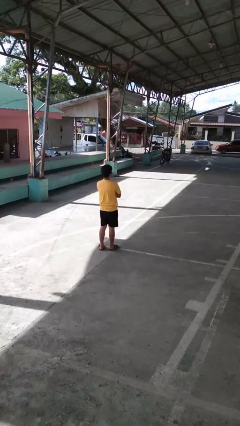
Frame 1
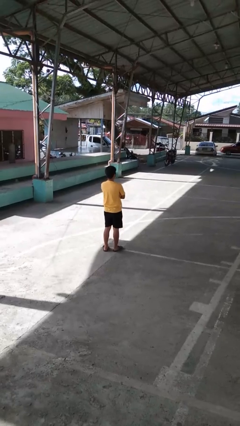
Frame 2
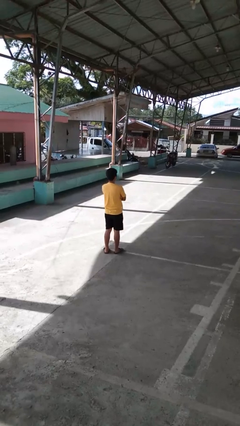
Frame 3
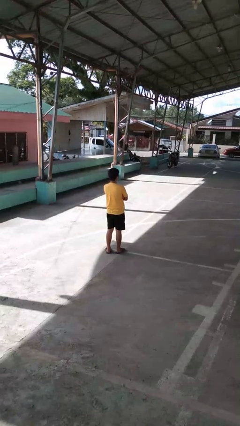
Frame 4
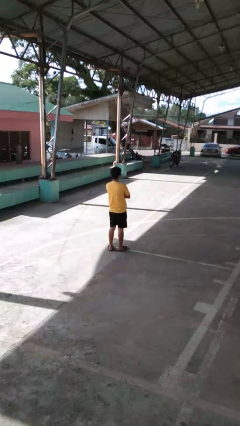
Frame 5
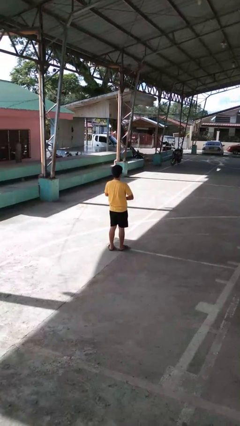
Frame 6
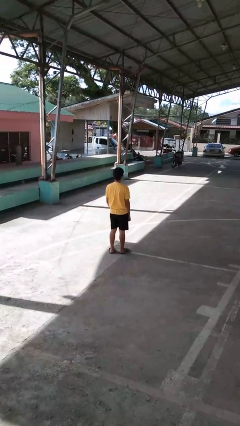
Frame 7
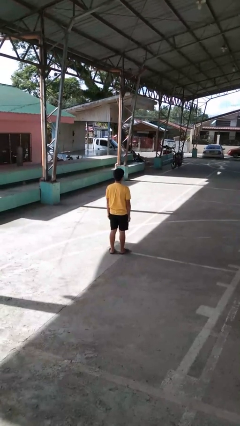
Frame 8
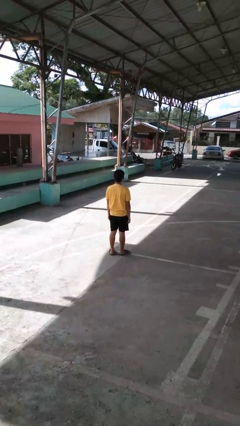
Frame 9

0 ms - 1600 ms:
person crosses arms

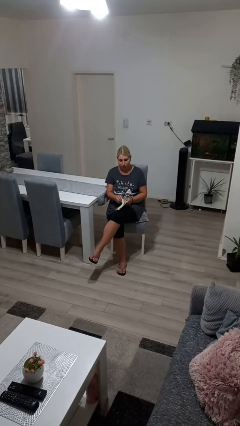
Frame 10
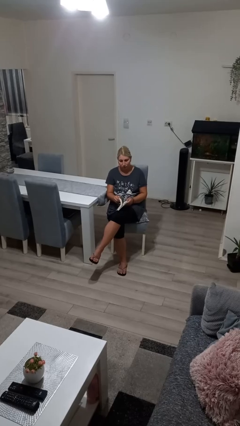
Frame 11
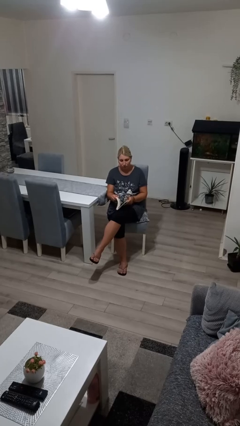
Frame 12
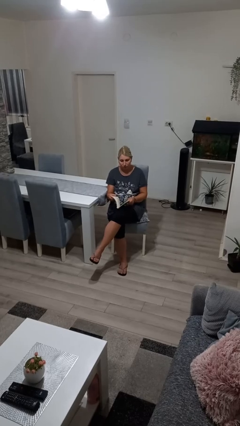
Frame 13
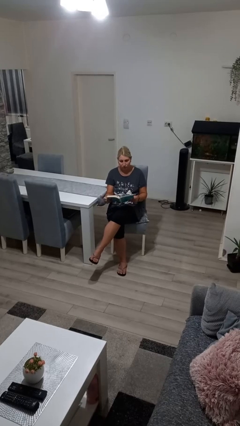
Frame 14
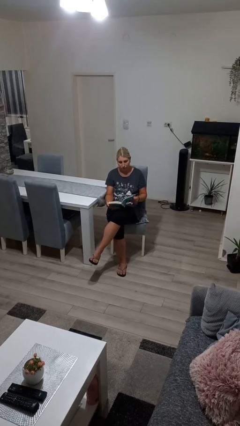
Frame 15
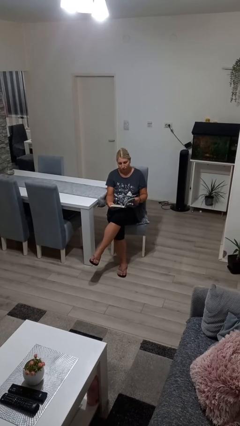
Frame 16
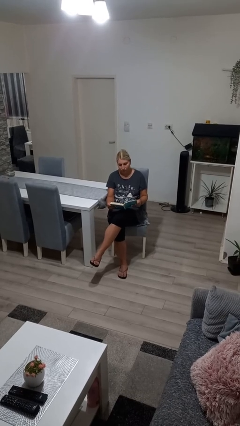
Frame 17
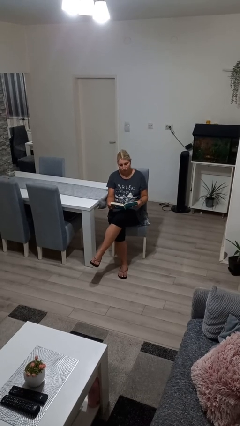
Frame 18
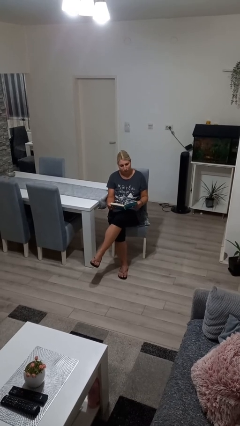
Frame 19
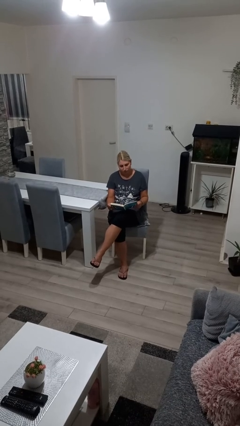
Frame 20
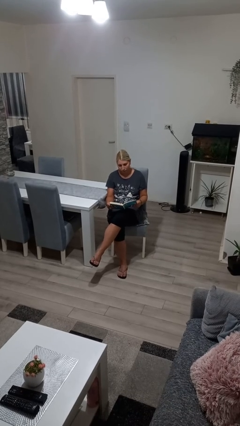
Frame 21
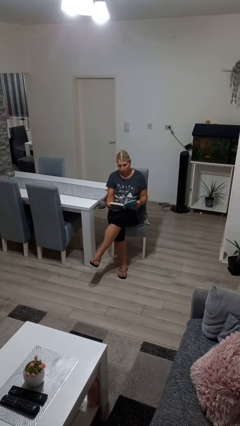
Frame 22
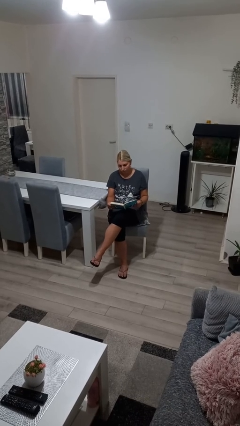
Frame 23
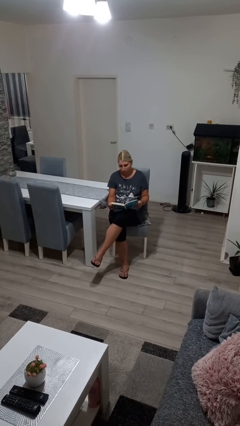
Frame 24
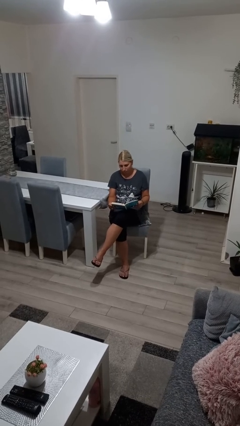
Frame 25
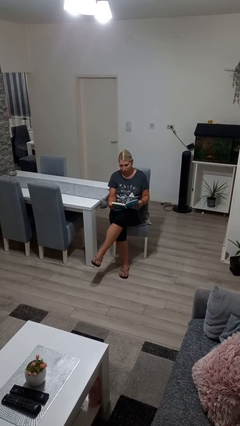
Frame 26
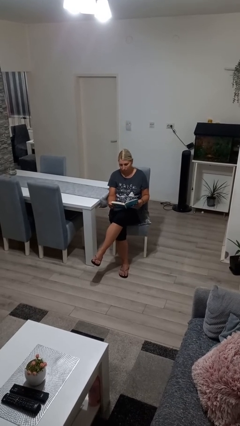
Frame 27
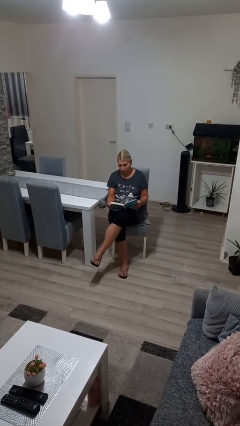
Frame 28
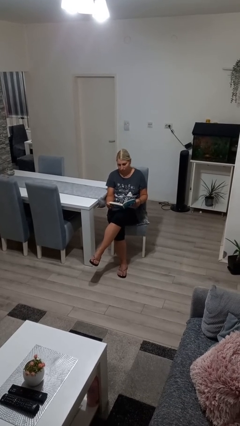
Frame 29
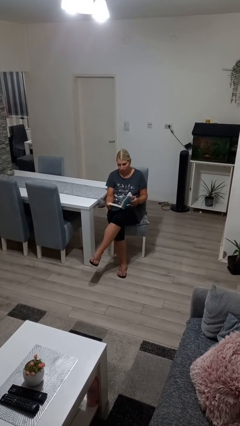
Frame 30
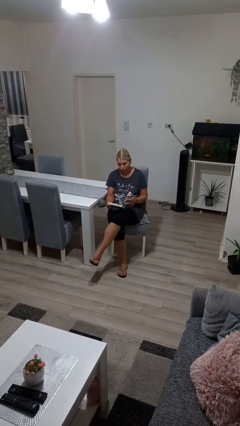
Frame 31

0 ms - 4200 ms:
person reads book

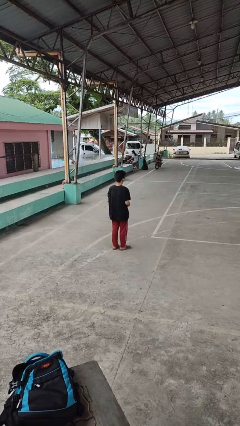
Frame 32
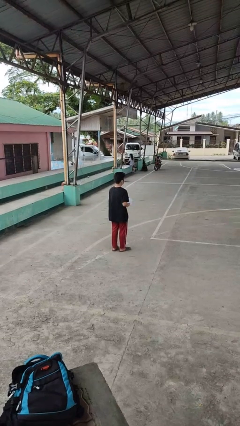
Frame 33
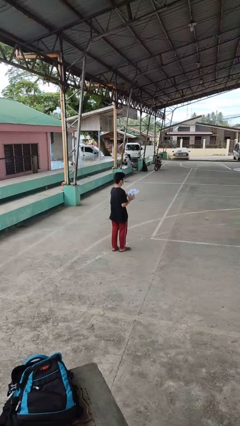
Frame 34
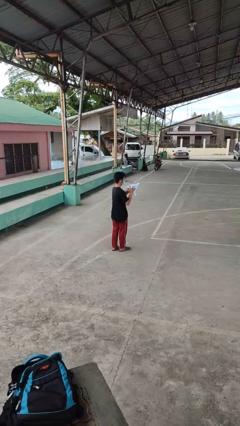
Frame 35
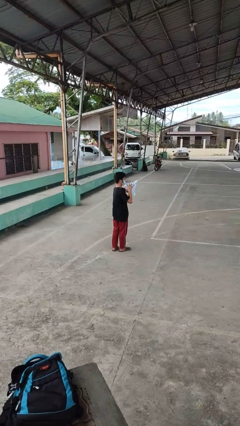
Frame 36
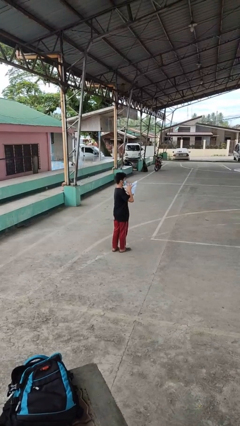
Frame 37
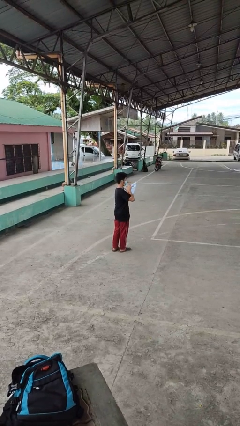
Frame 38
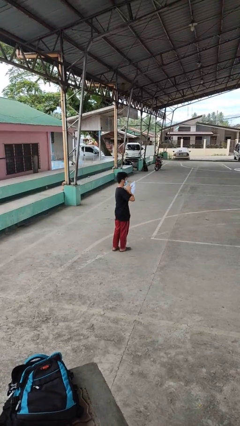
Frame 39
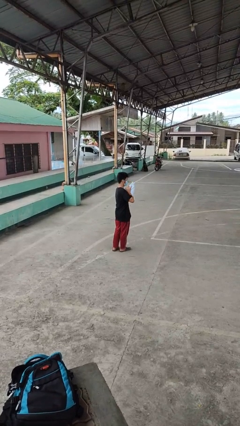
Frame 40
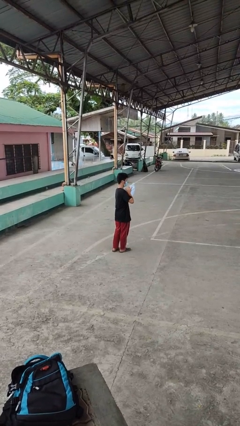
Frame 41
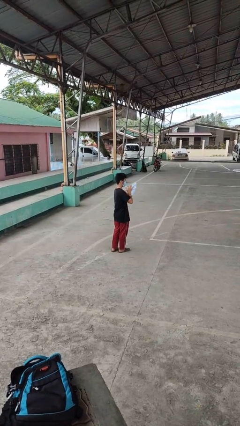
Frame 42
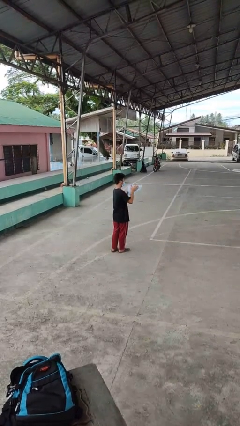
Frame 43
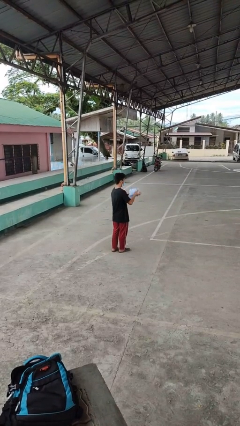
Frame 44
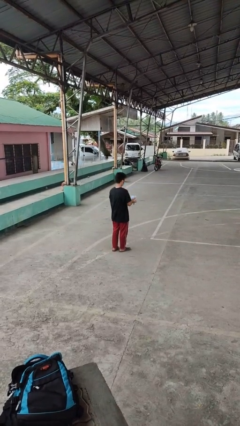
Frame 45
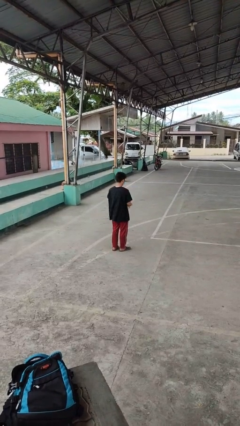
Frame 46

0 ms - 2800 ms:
person squeezes object

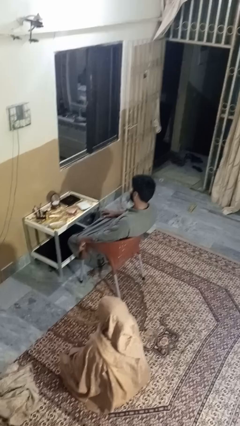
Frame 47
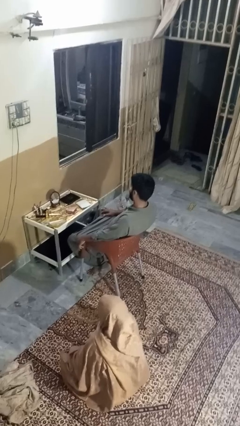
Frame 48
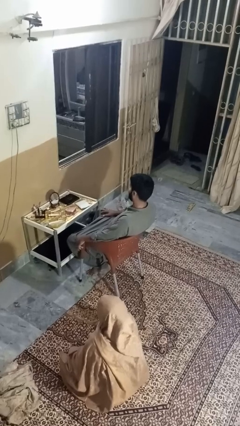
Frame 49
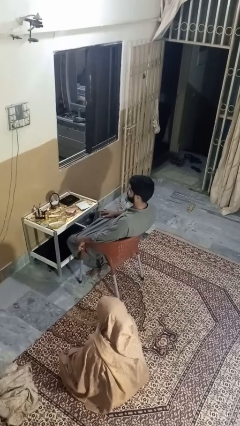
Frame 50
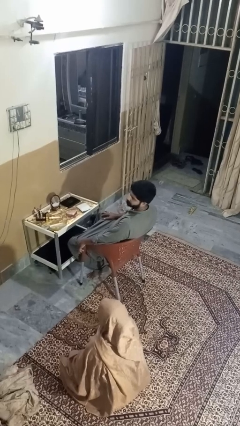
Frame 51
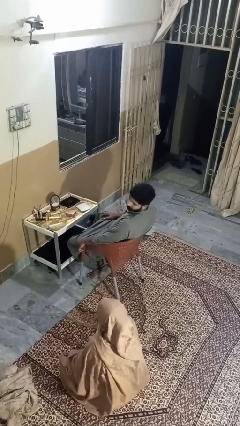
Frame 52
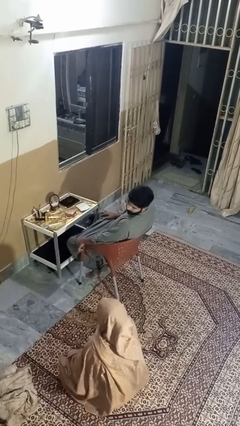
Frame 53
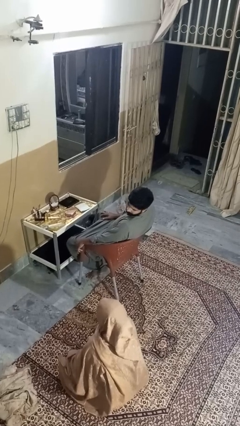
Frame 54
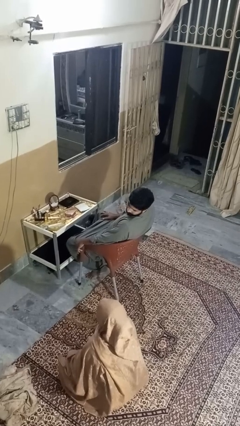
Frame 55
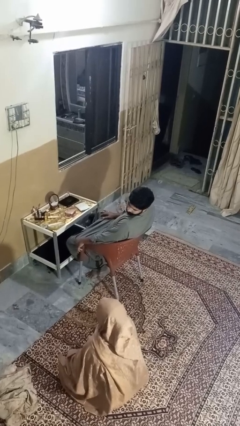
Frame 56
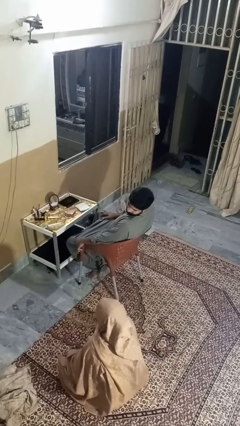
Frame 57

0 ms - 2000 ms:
person looks over shoulder

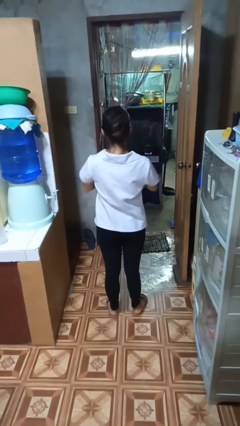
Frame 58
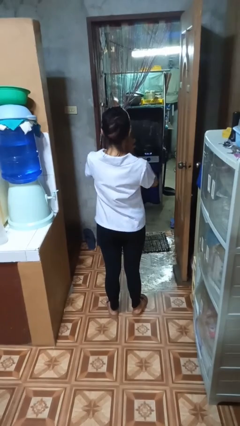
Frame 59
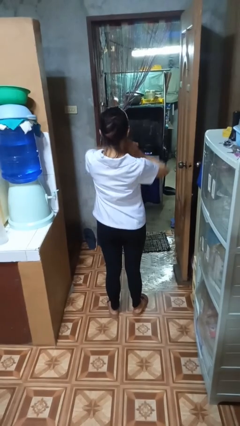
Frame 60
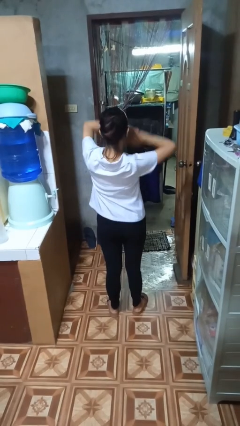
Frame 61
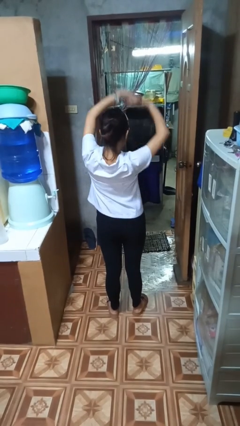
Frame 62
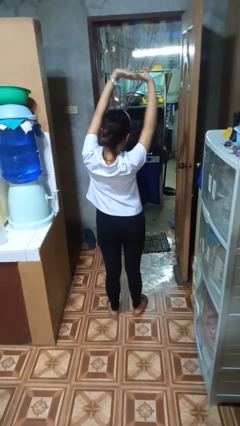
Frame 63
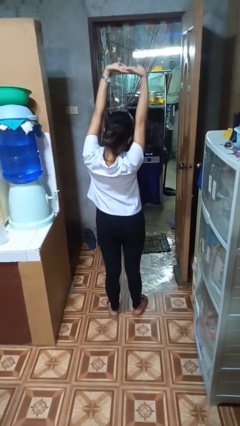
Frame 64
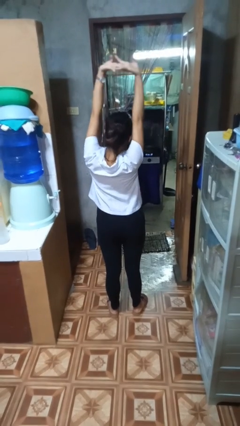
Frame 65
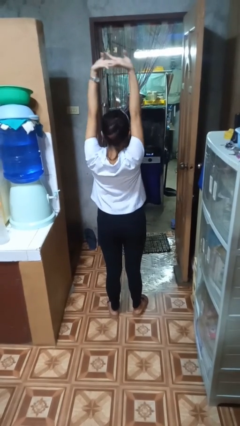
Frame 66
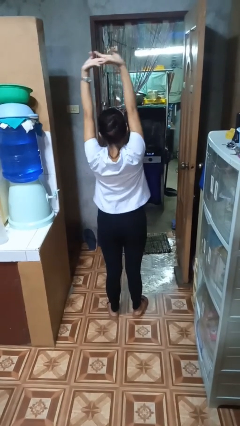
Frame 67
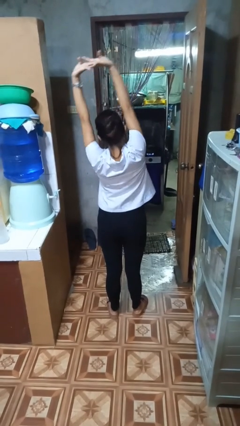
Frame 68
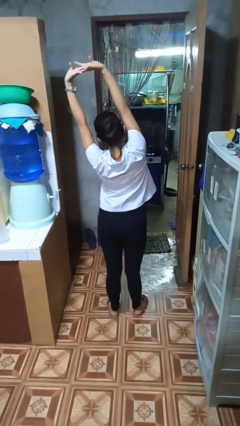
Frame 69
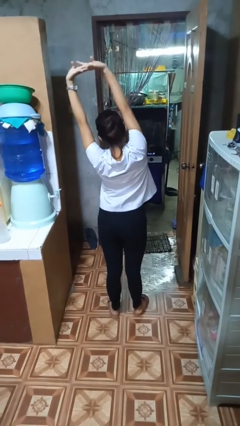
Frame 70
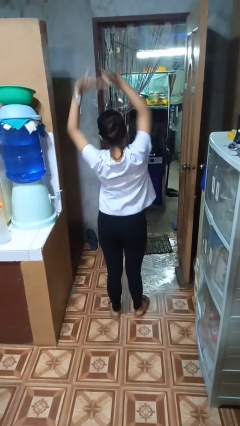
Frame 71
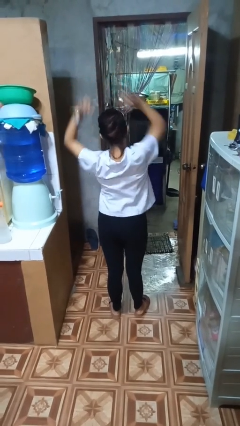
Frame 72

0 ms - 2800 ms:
person stretches arms over head

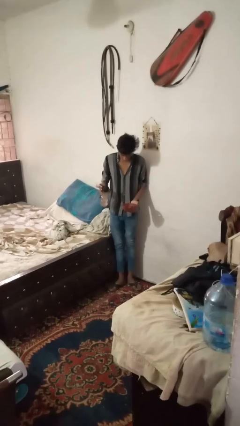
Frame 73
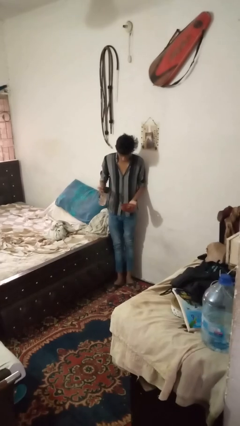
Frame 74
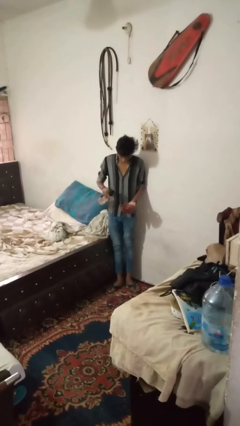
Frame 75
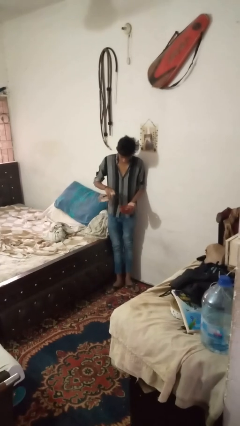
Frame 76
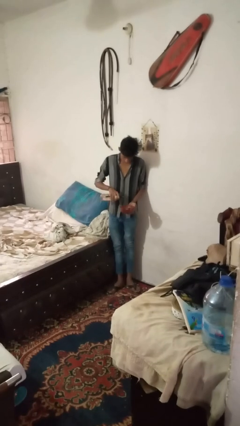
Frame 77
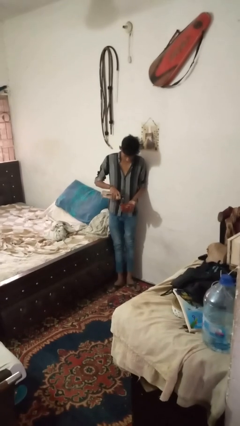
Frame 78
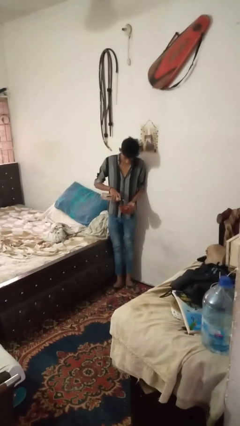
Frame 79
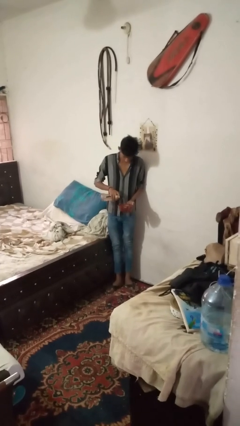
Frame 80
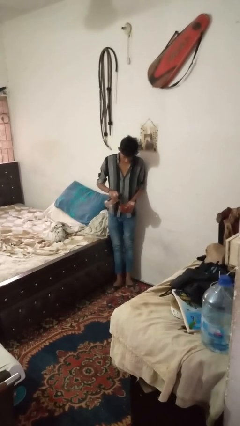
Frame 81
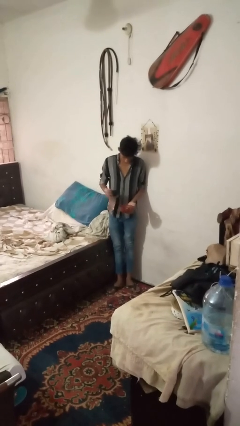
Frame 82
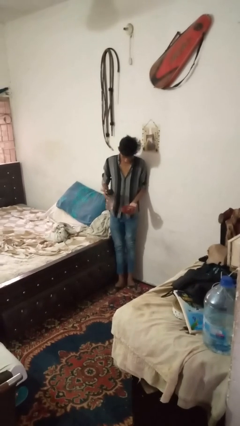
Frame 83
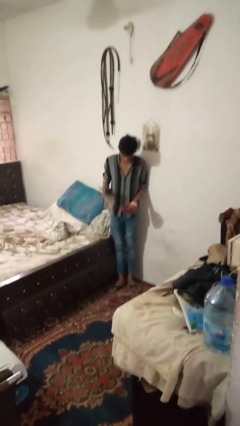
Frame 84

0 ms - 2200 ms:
person pours liquid into cup

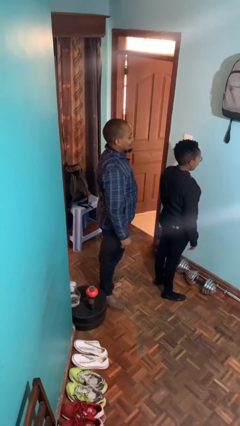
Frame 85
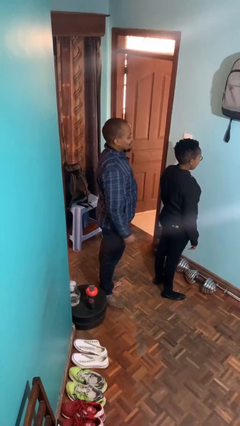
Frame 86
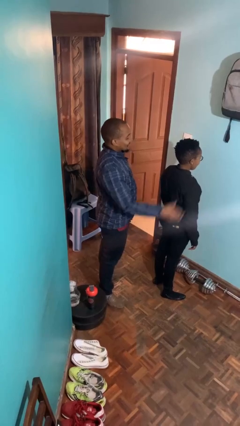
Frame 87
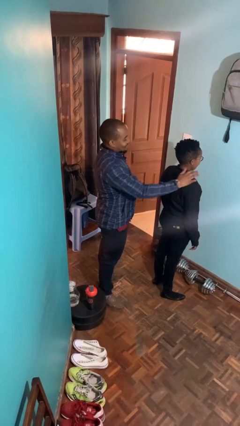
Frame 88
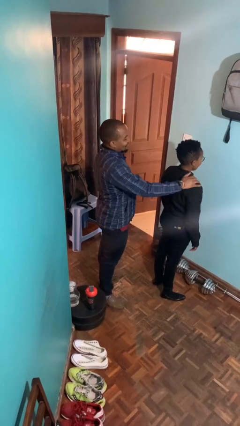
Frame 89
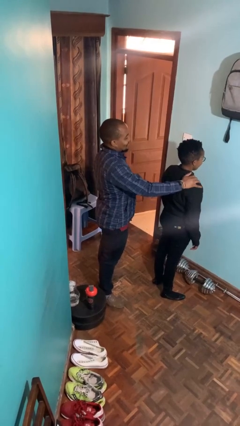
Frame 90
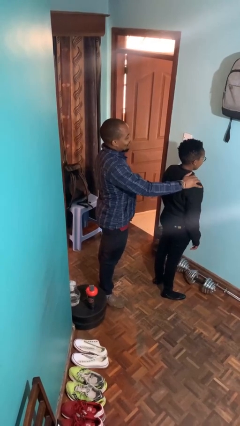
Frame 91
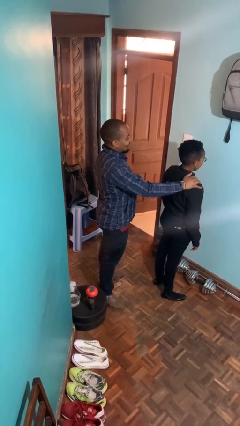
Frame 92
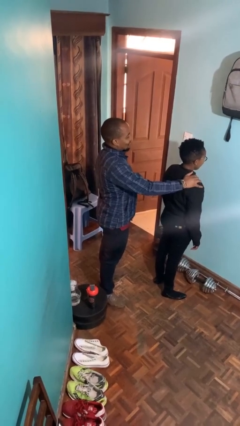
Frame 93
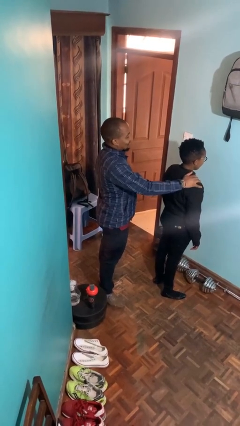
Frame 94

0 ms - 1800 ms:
person grabs person by shoulder
